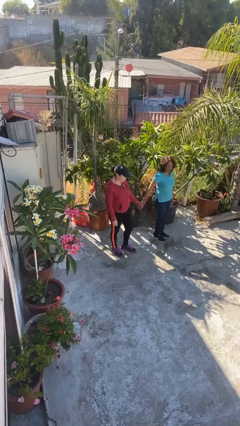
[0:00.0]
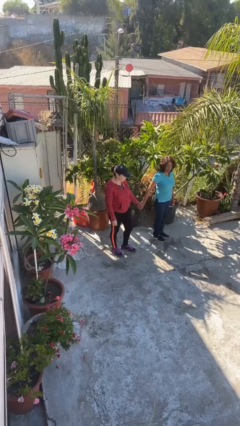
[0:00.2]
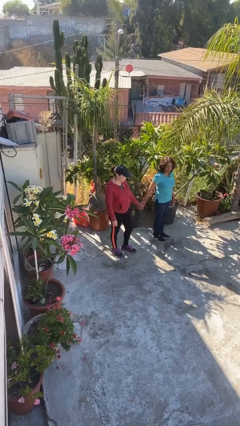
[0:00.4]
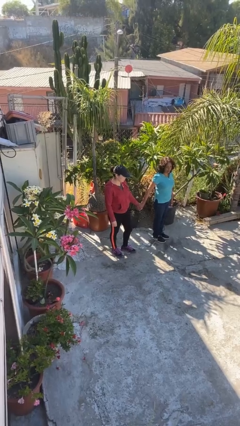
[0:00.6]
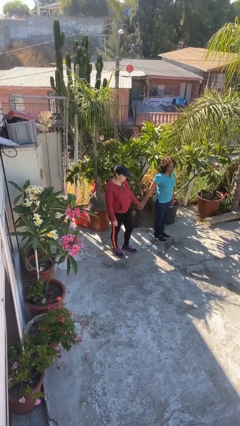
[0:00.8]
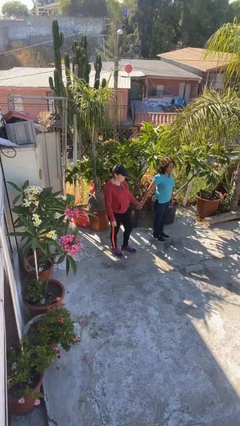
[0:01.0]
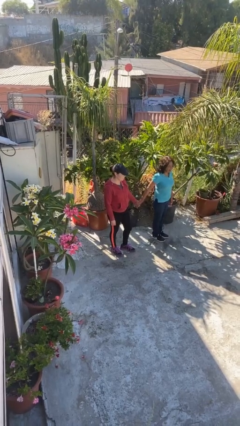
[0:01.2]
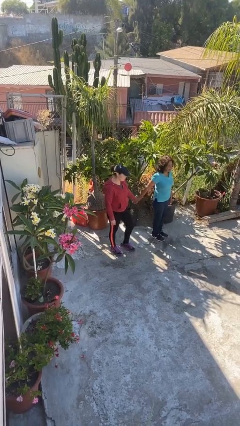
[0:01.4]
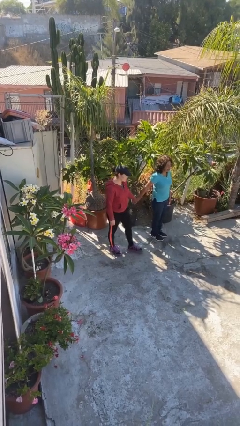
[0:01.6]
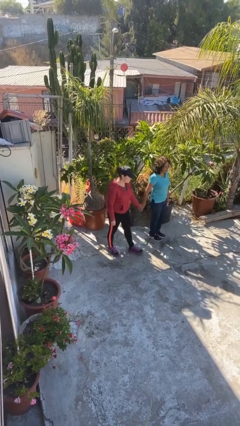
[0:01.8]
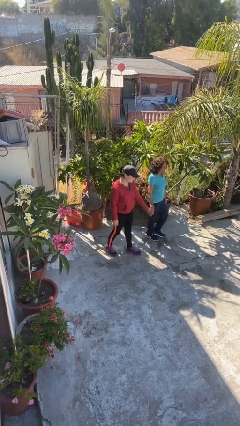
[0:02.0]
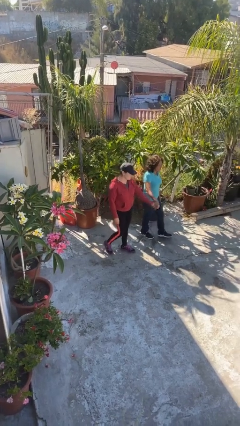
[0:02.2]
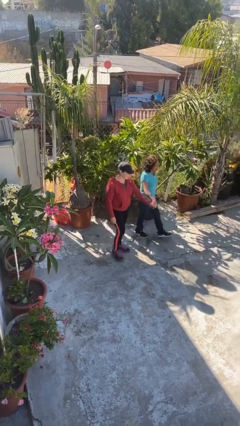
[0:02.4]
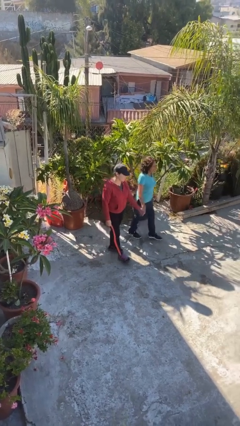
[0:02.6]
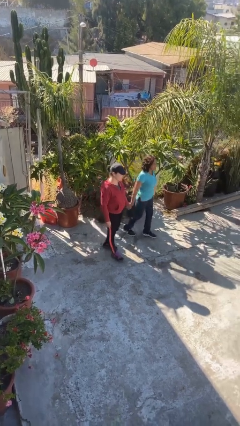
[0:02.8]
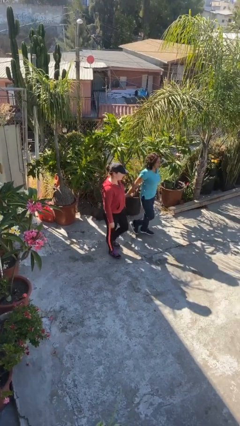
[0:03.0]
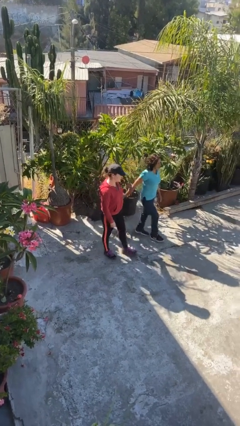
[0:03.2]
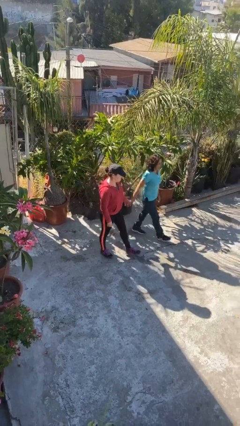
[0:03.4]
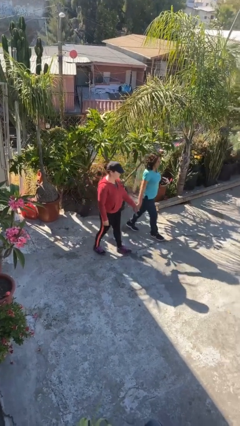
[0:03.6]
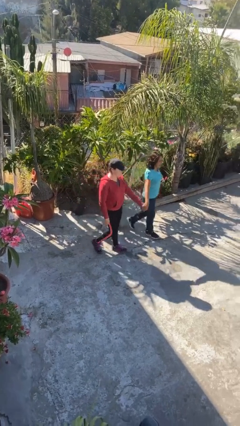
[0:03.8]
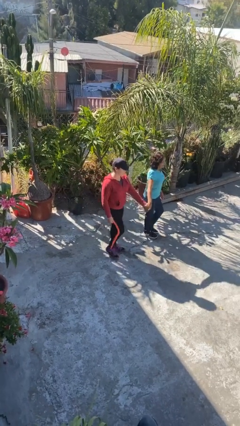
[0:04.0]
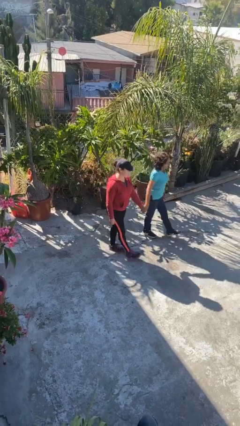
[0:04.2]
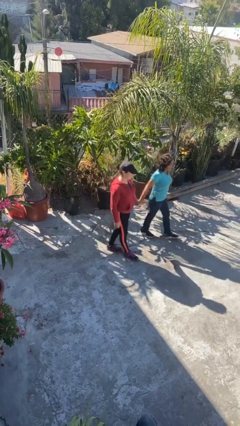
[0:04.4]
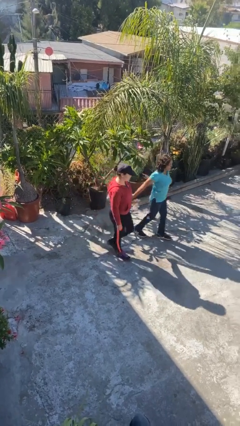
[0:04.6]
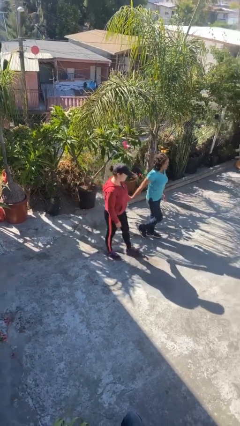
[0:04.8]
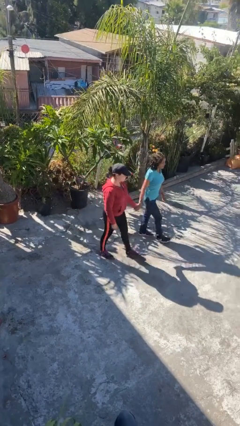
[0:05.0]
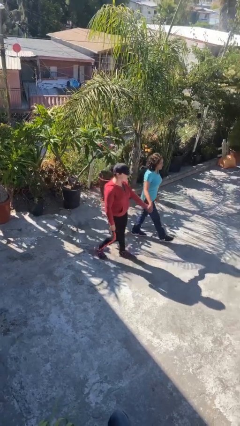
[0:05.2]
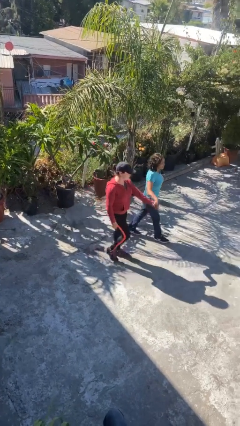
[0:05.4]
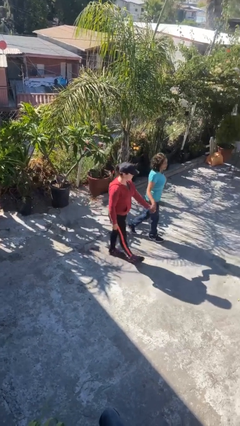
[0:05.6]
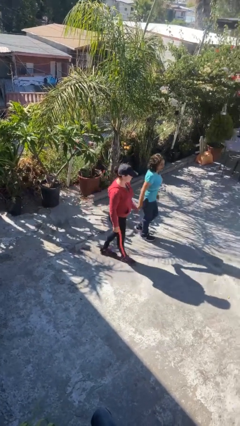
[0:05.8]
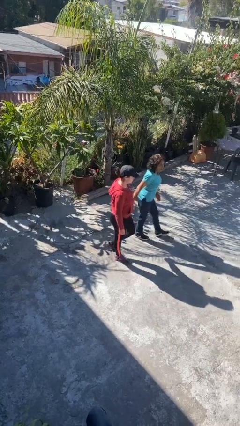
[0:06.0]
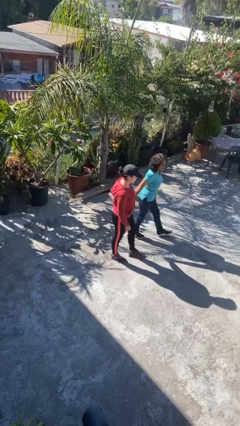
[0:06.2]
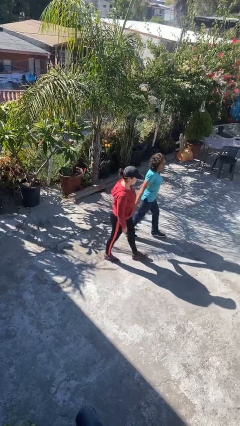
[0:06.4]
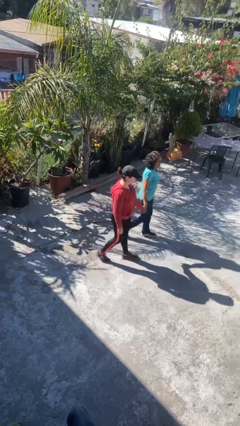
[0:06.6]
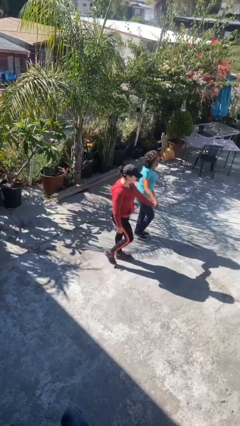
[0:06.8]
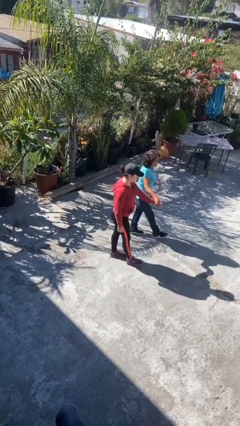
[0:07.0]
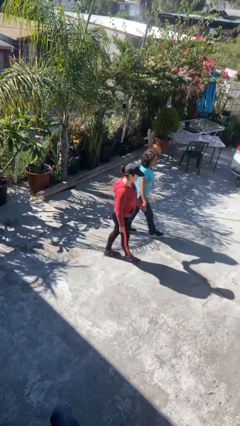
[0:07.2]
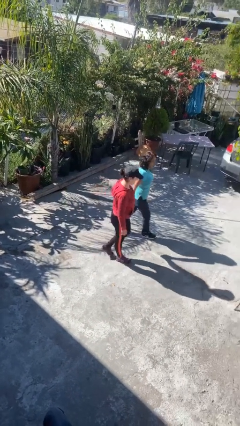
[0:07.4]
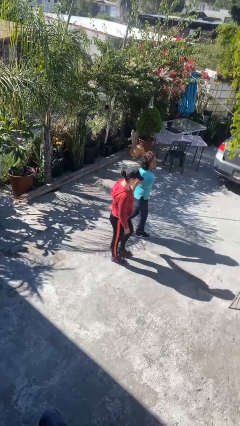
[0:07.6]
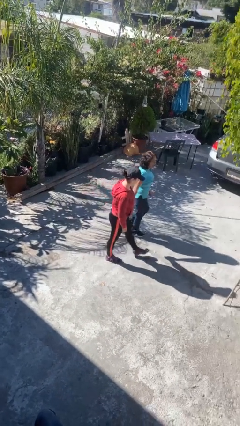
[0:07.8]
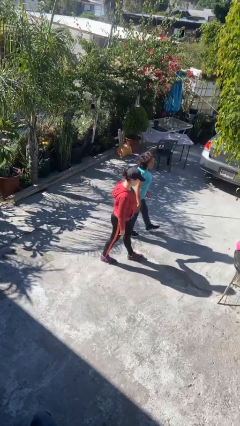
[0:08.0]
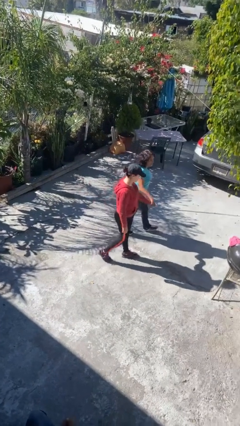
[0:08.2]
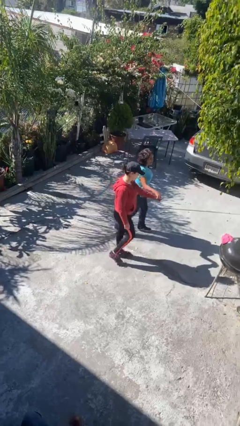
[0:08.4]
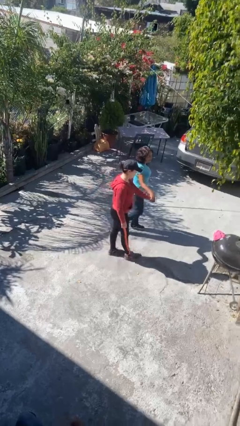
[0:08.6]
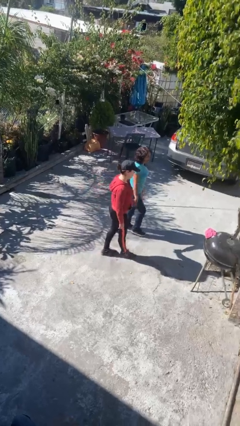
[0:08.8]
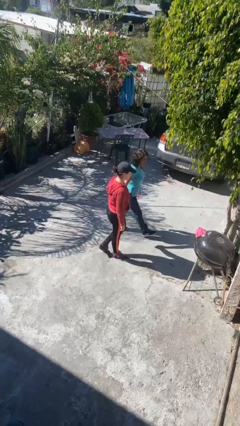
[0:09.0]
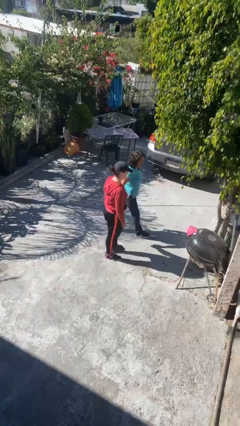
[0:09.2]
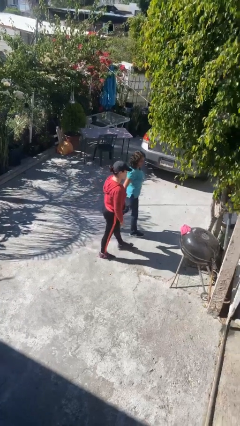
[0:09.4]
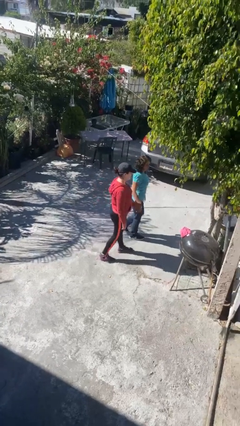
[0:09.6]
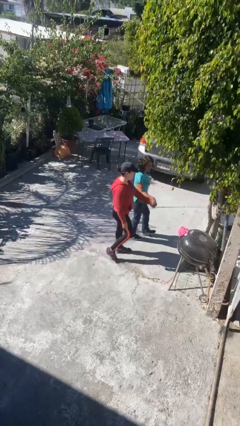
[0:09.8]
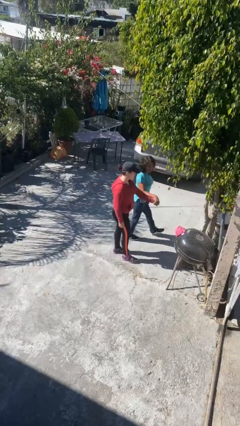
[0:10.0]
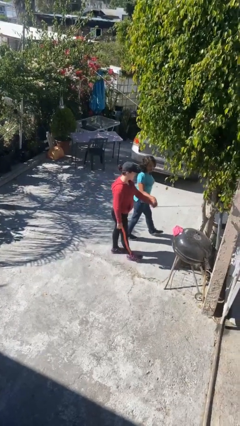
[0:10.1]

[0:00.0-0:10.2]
person holds hand

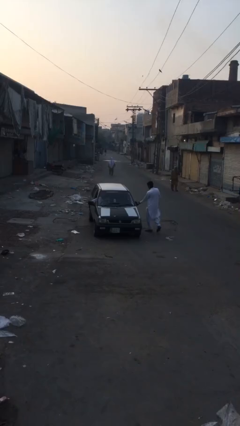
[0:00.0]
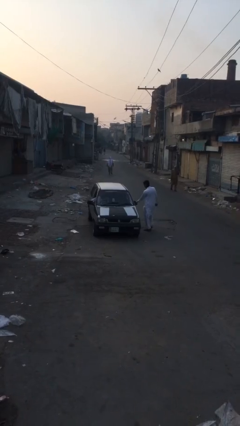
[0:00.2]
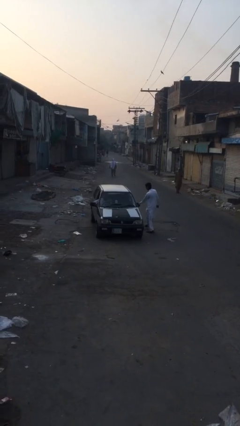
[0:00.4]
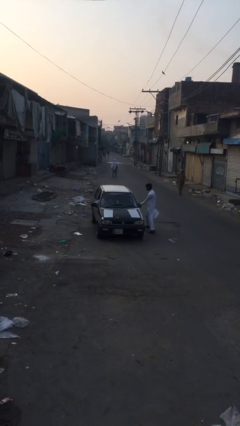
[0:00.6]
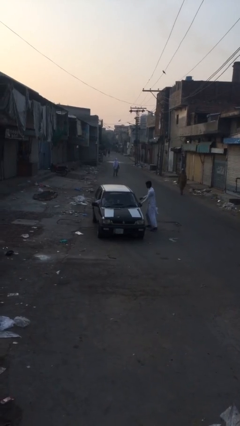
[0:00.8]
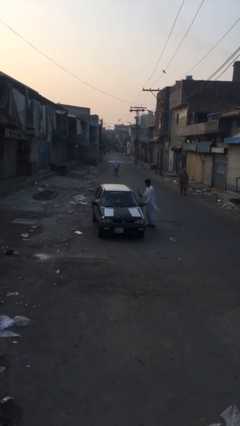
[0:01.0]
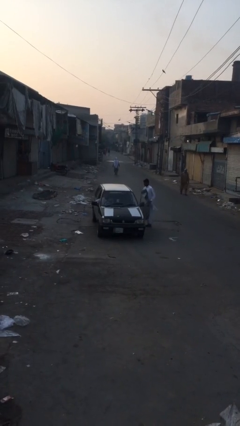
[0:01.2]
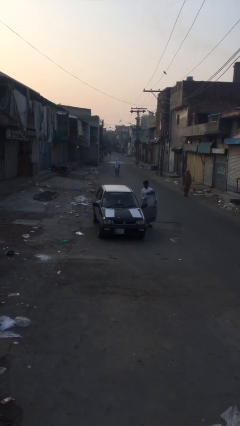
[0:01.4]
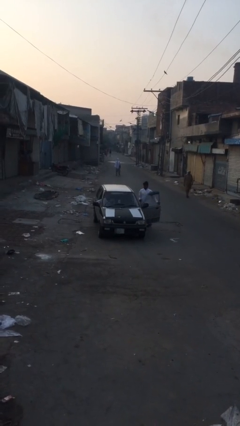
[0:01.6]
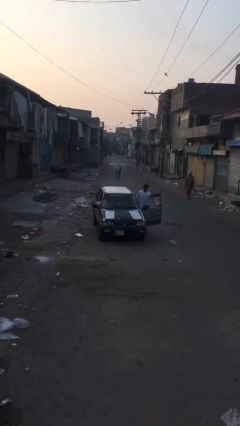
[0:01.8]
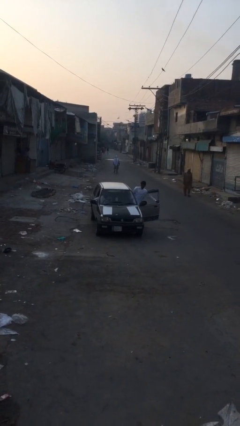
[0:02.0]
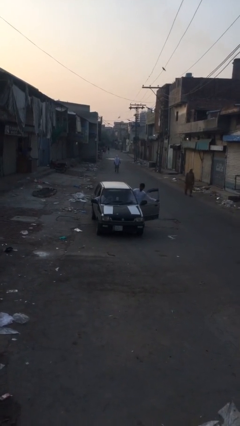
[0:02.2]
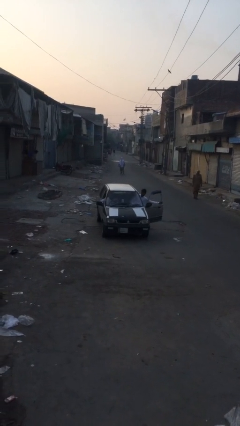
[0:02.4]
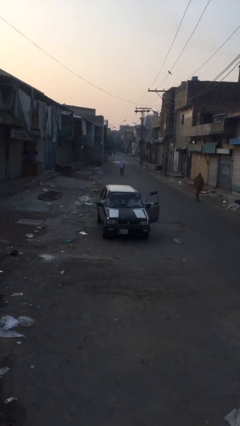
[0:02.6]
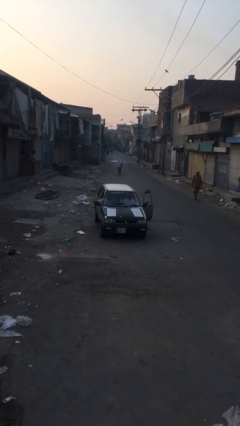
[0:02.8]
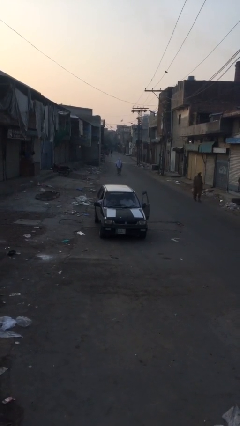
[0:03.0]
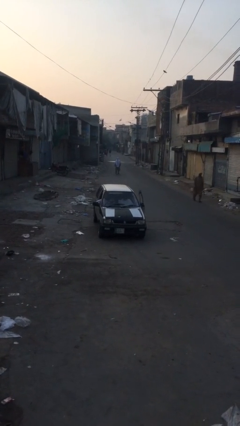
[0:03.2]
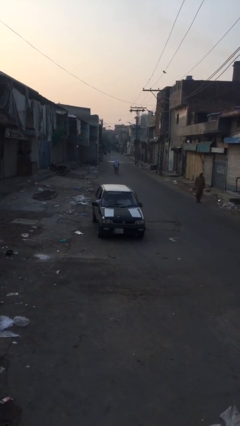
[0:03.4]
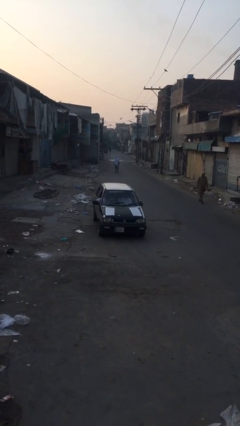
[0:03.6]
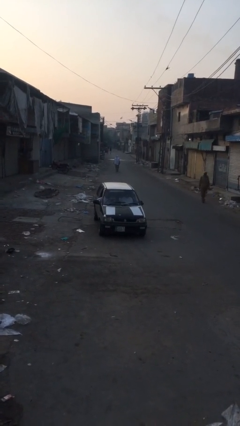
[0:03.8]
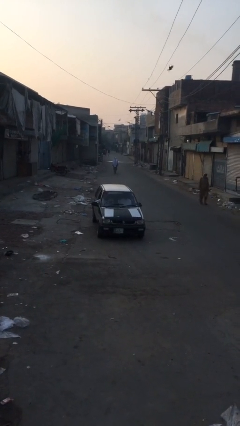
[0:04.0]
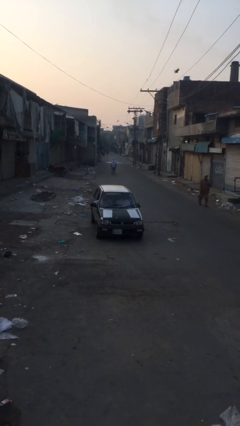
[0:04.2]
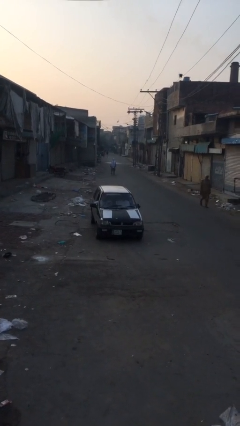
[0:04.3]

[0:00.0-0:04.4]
car picks up person

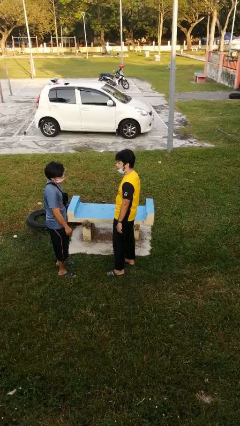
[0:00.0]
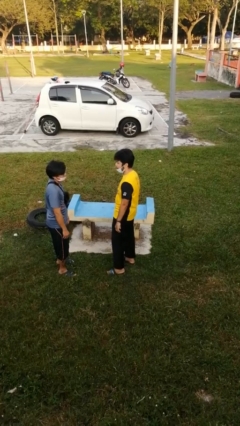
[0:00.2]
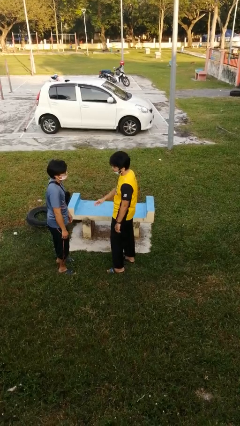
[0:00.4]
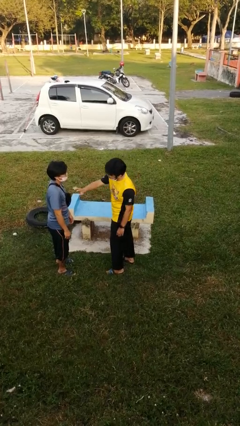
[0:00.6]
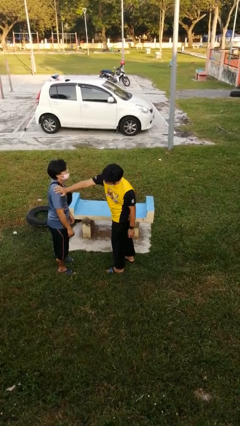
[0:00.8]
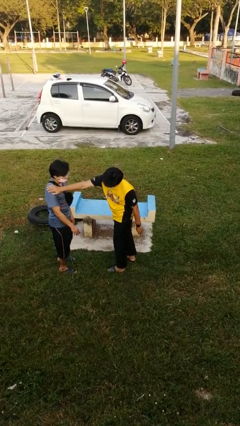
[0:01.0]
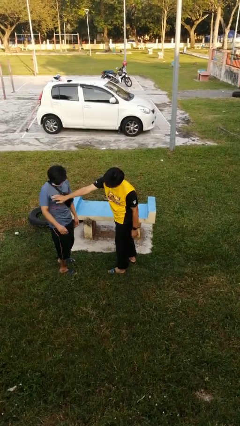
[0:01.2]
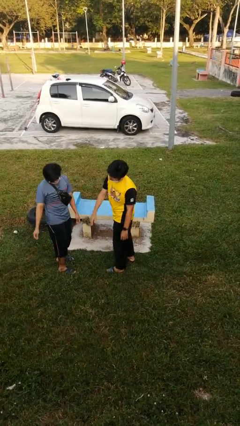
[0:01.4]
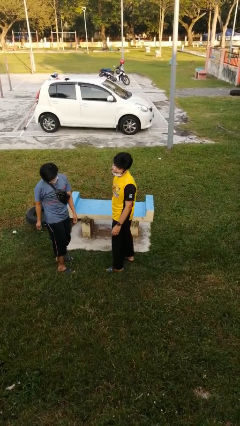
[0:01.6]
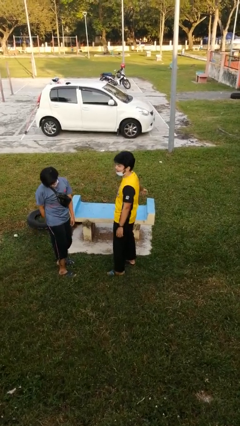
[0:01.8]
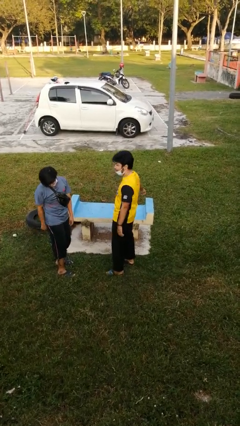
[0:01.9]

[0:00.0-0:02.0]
person shoves person

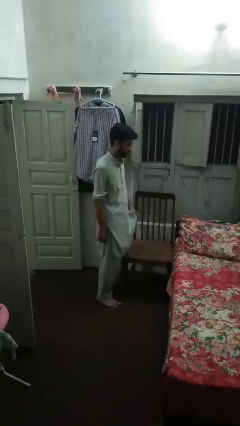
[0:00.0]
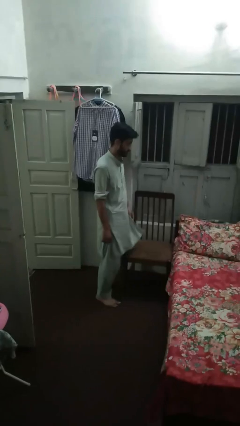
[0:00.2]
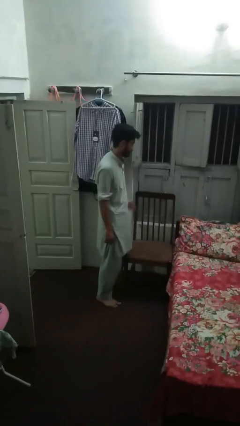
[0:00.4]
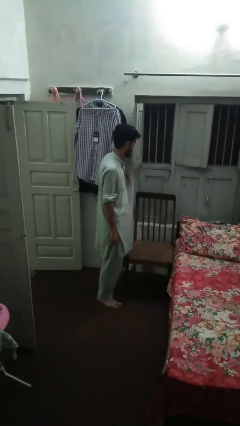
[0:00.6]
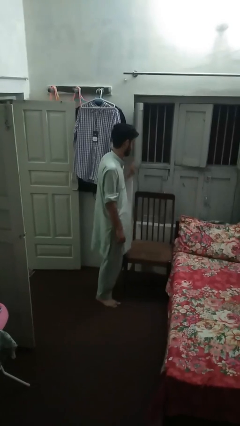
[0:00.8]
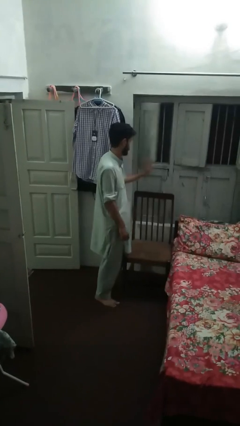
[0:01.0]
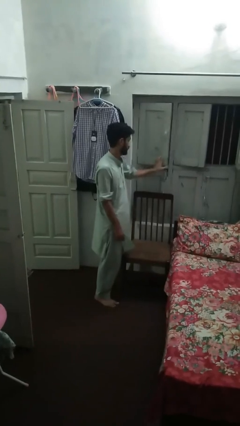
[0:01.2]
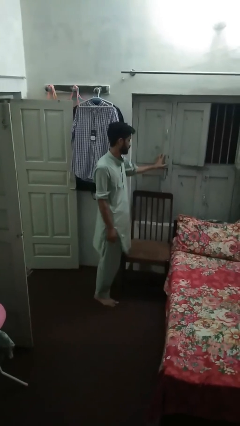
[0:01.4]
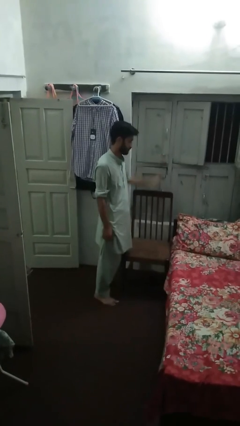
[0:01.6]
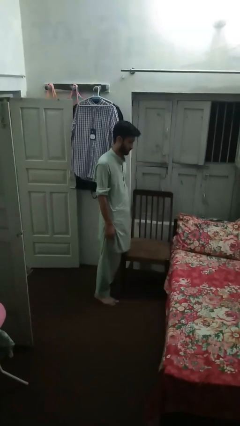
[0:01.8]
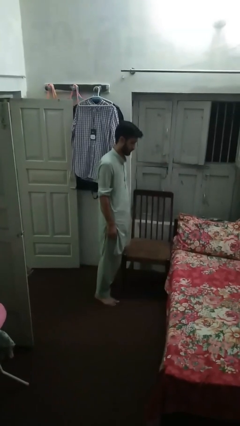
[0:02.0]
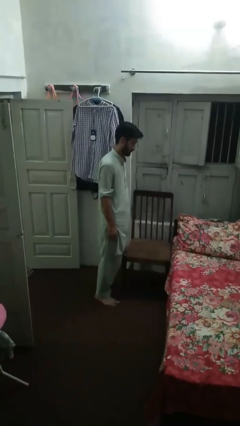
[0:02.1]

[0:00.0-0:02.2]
person closes home window
